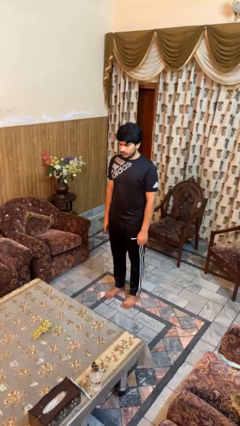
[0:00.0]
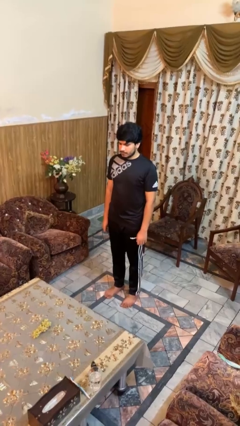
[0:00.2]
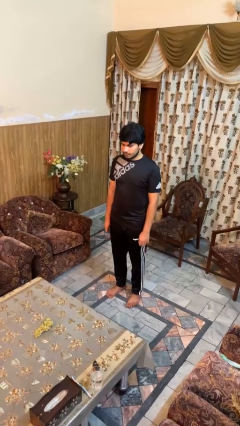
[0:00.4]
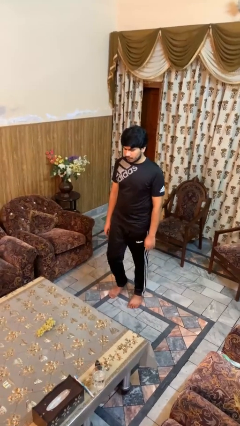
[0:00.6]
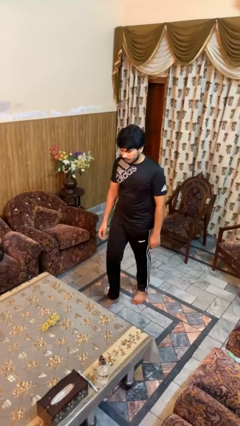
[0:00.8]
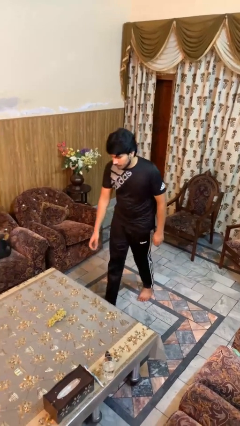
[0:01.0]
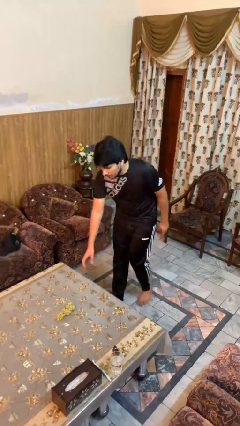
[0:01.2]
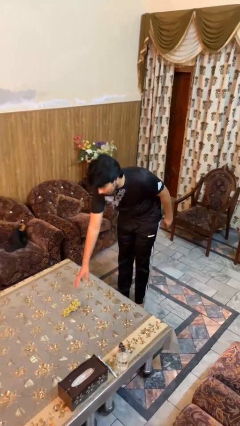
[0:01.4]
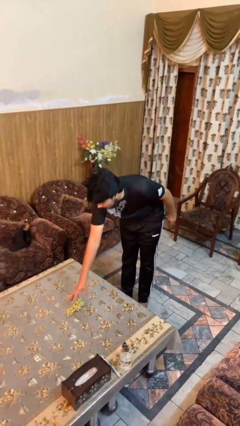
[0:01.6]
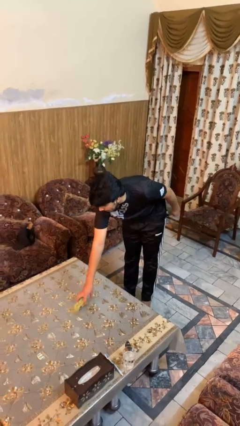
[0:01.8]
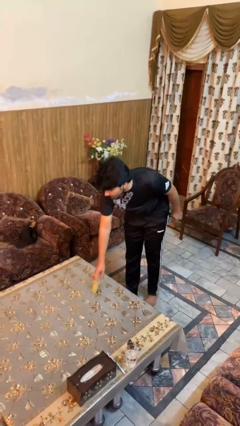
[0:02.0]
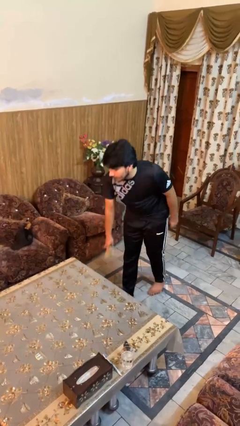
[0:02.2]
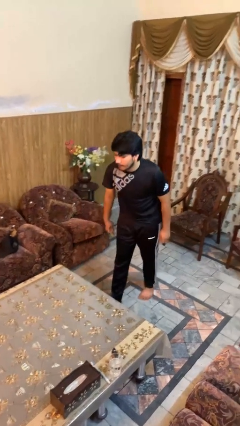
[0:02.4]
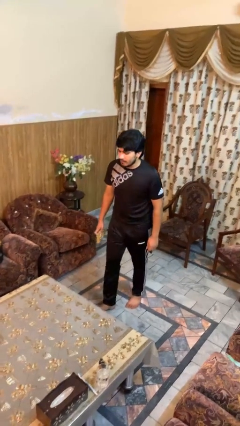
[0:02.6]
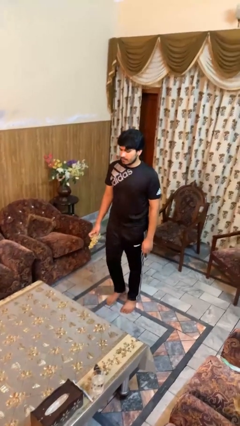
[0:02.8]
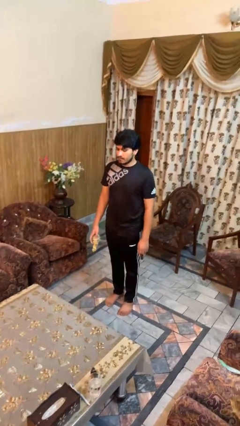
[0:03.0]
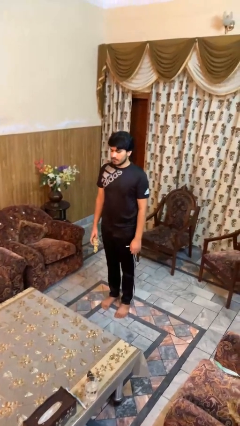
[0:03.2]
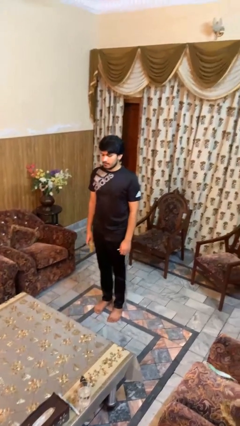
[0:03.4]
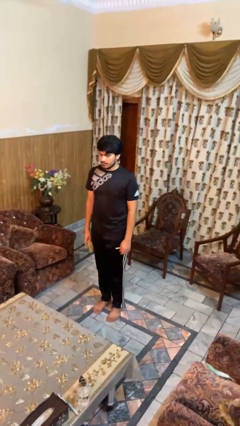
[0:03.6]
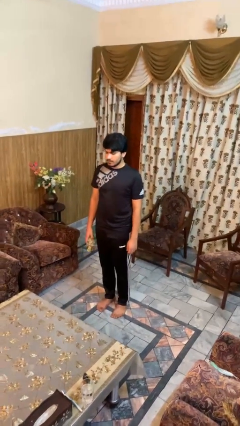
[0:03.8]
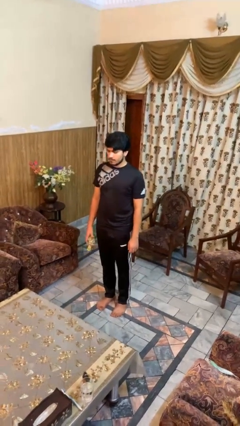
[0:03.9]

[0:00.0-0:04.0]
person picks up object from table

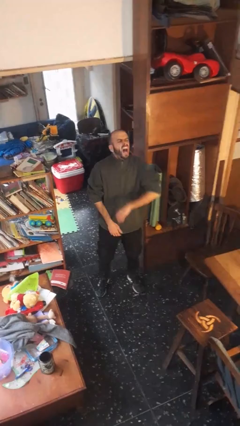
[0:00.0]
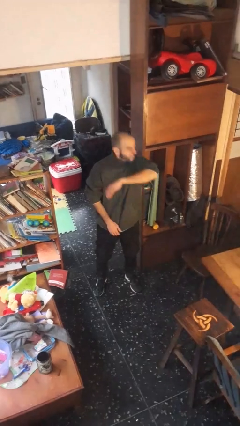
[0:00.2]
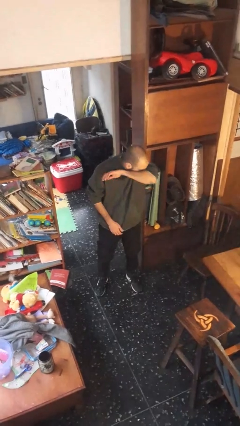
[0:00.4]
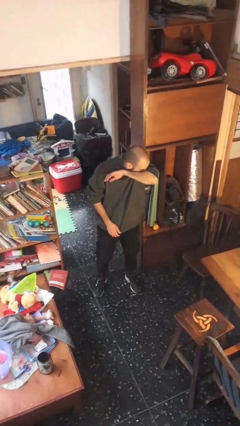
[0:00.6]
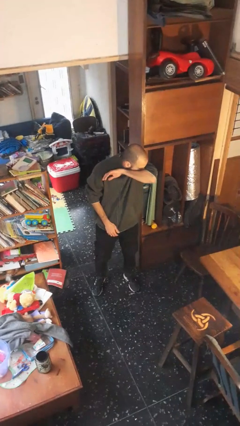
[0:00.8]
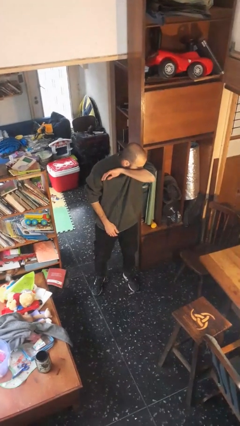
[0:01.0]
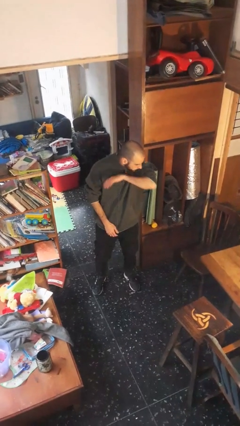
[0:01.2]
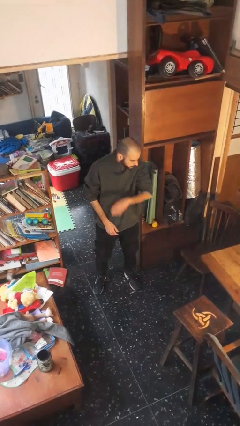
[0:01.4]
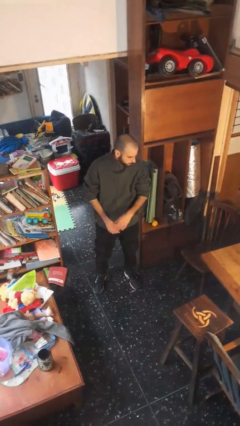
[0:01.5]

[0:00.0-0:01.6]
person sneezes into arm

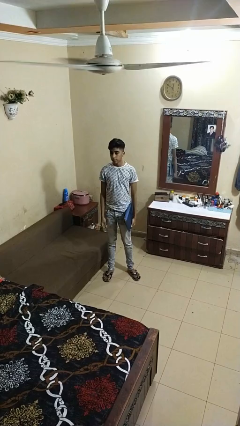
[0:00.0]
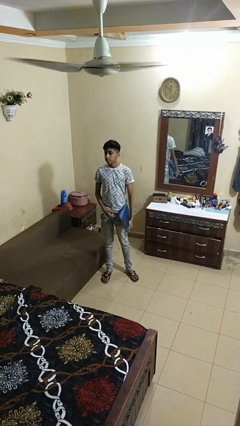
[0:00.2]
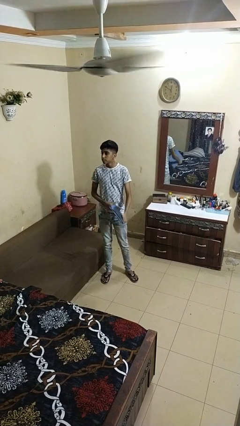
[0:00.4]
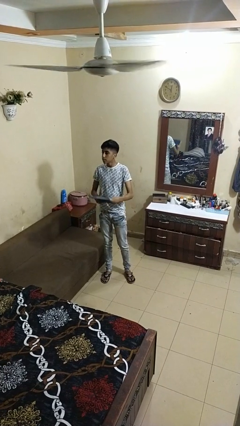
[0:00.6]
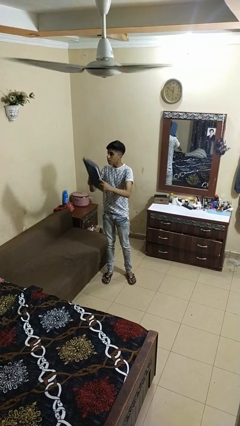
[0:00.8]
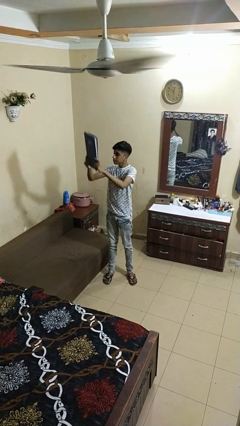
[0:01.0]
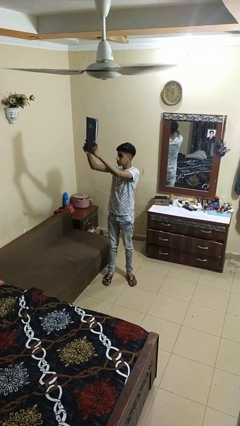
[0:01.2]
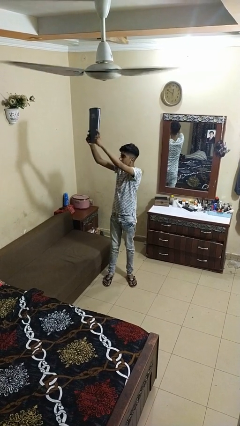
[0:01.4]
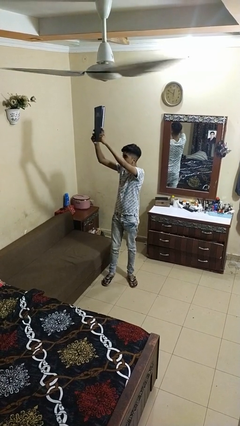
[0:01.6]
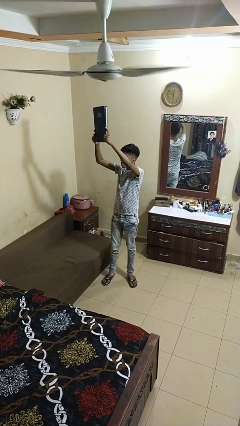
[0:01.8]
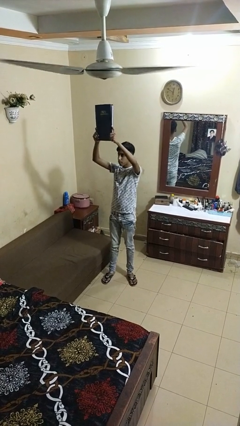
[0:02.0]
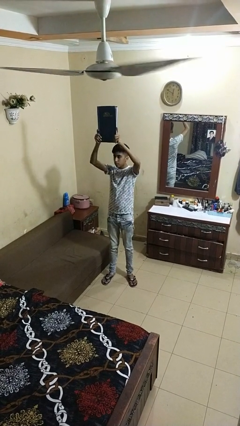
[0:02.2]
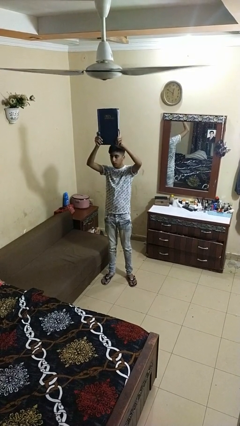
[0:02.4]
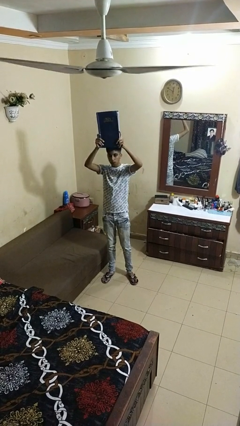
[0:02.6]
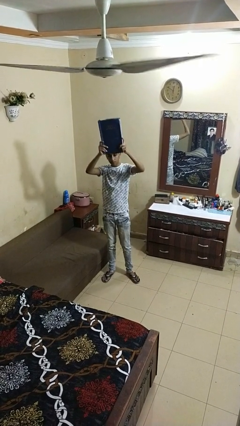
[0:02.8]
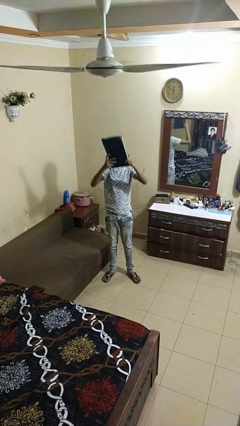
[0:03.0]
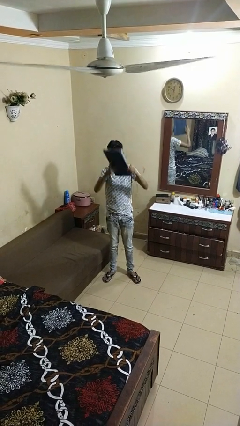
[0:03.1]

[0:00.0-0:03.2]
person holds object above head

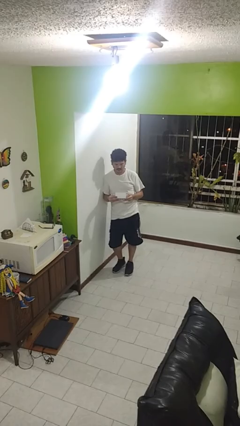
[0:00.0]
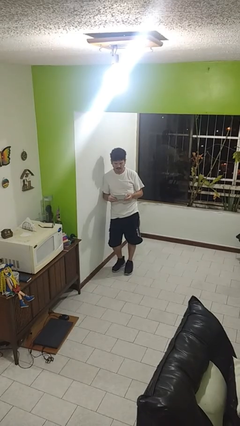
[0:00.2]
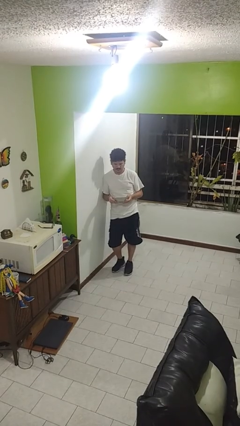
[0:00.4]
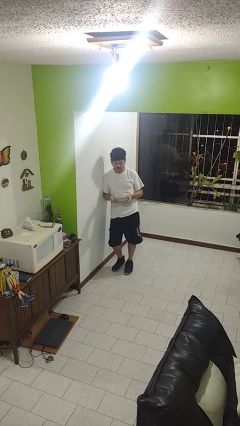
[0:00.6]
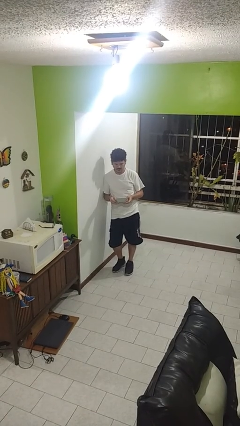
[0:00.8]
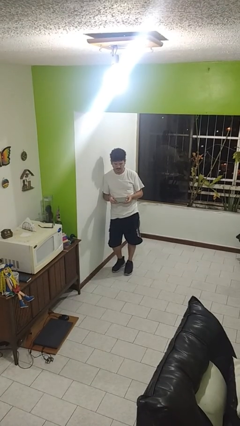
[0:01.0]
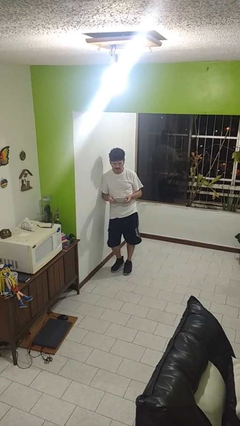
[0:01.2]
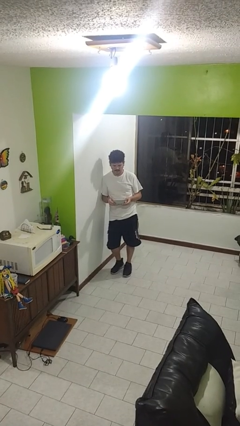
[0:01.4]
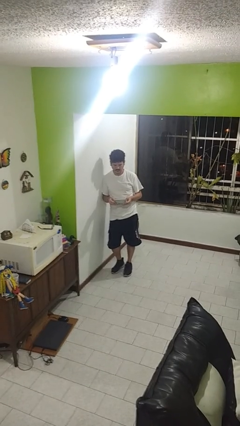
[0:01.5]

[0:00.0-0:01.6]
person interacts with handheld game

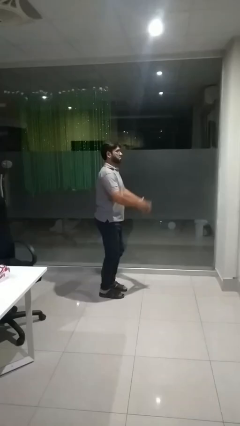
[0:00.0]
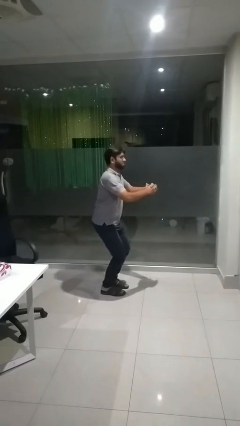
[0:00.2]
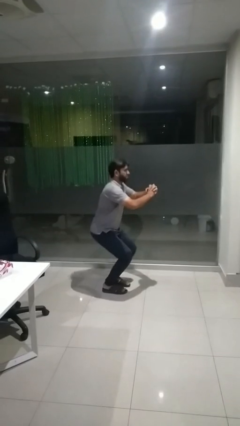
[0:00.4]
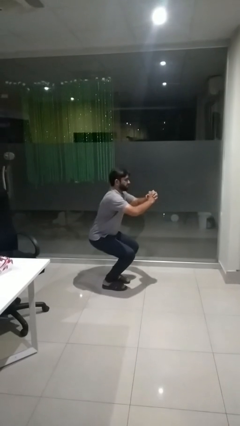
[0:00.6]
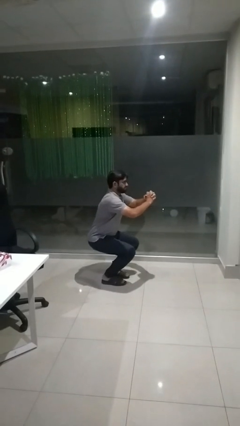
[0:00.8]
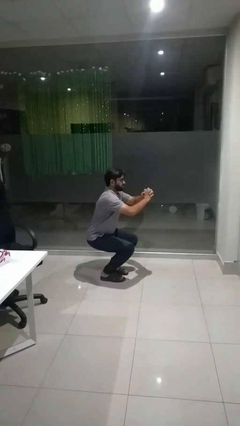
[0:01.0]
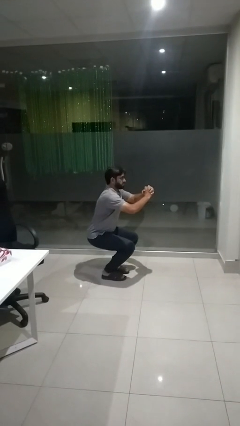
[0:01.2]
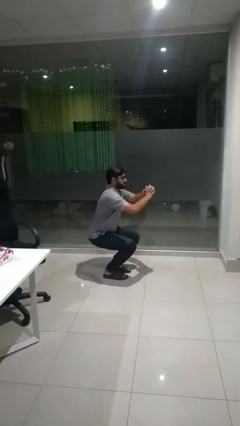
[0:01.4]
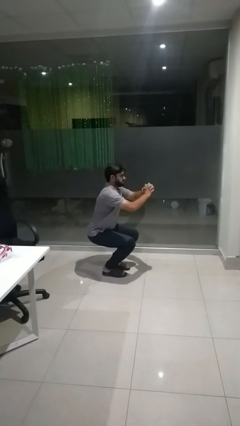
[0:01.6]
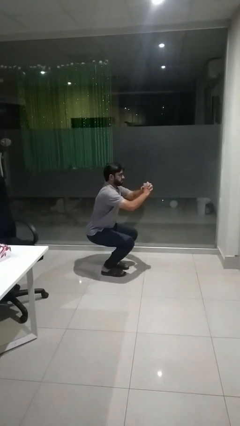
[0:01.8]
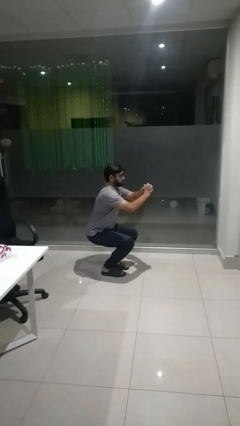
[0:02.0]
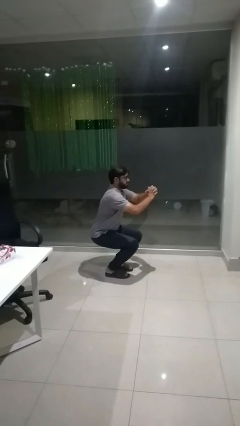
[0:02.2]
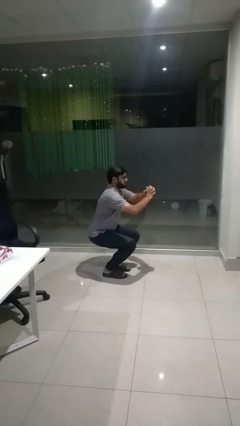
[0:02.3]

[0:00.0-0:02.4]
person squats

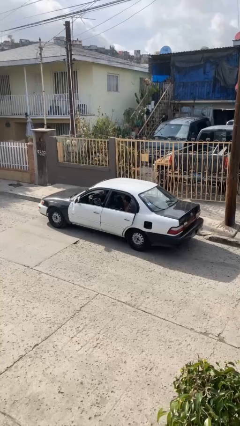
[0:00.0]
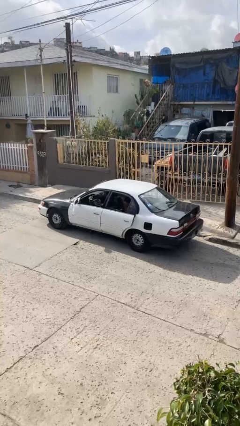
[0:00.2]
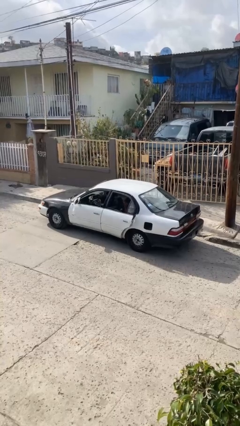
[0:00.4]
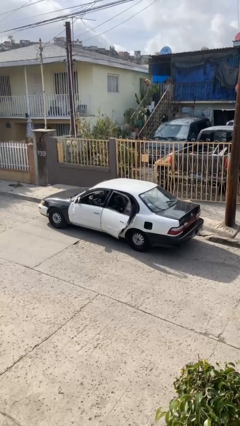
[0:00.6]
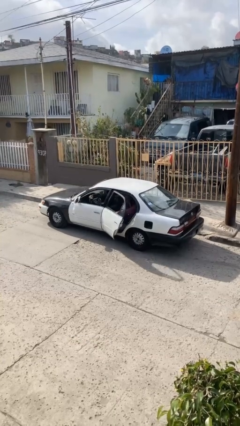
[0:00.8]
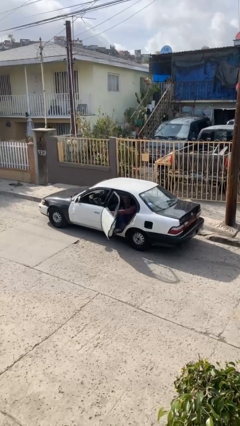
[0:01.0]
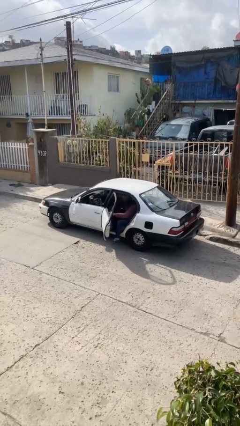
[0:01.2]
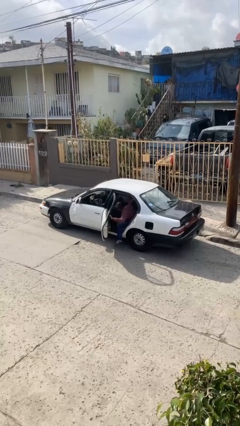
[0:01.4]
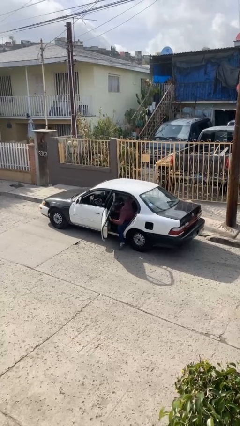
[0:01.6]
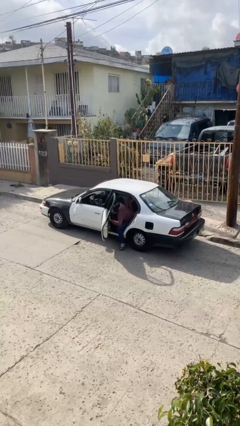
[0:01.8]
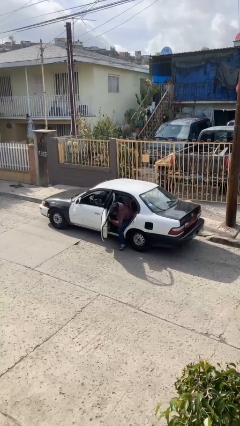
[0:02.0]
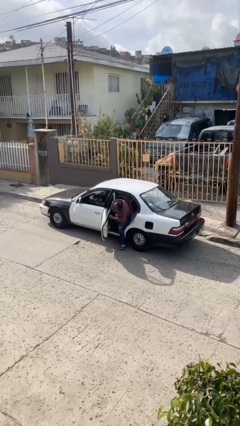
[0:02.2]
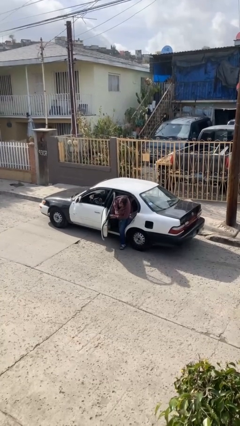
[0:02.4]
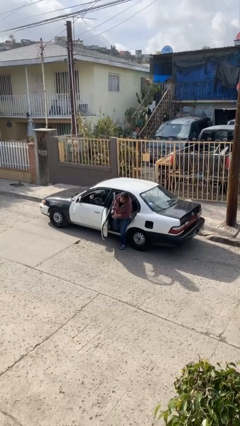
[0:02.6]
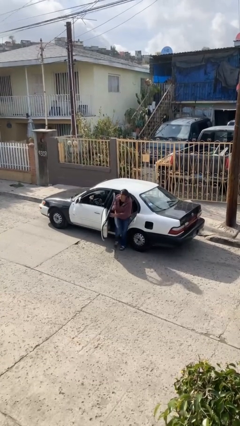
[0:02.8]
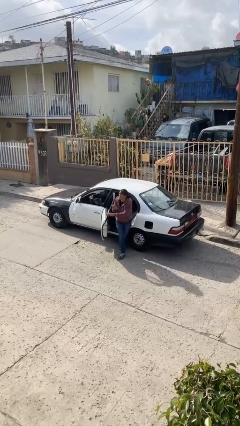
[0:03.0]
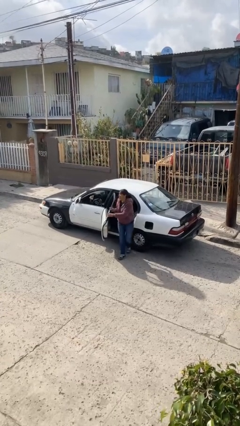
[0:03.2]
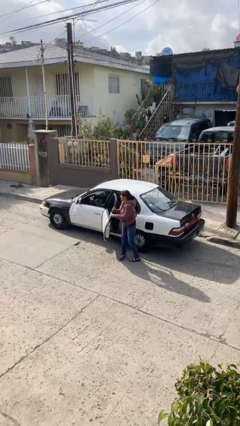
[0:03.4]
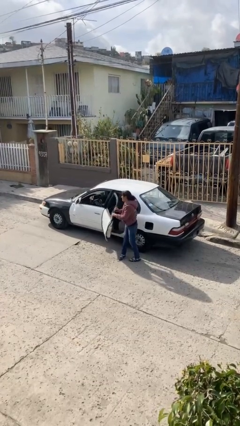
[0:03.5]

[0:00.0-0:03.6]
car drops off person

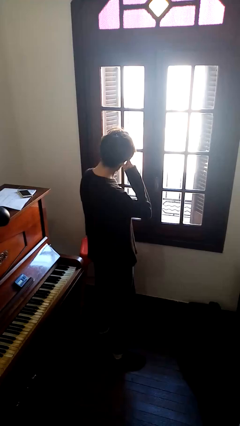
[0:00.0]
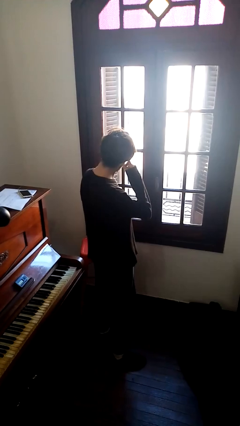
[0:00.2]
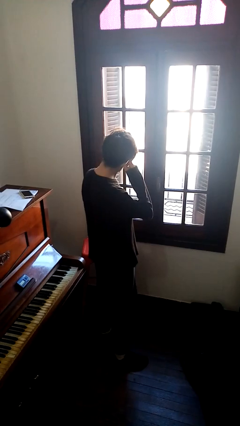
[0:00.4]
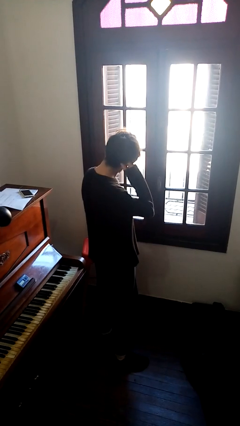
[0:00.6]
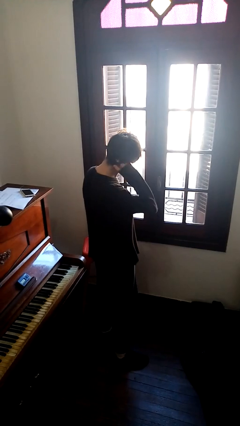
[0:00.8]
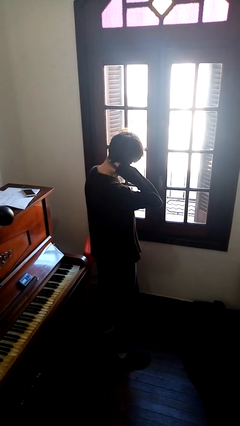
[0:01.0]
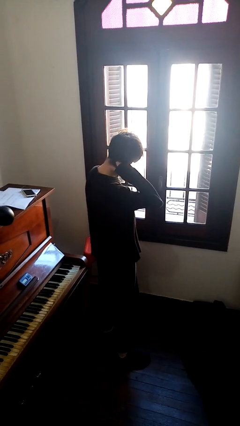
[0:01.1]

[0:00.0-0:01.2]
person opens home window
